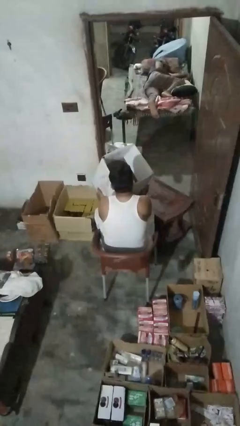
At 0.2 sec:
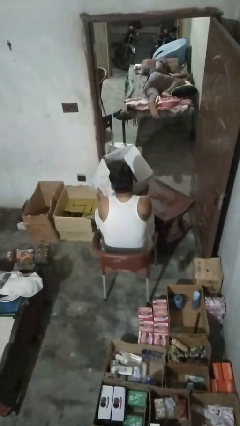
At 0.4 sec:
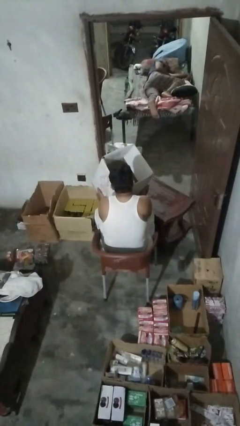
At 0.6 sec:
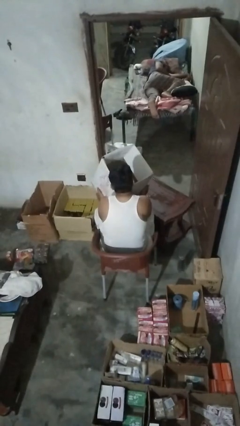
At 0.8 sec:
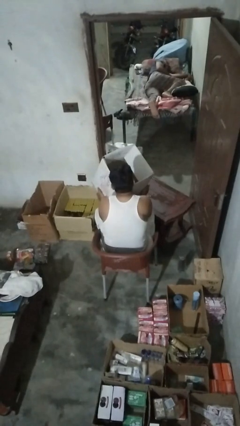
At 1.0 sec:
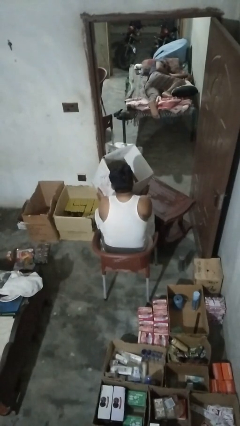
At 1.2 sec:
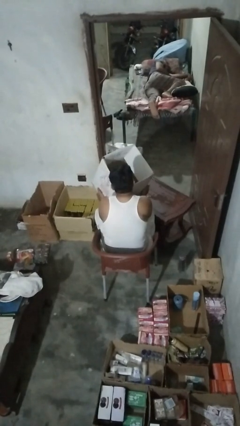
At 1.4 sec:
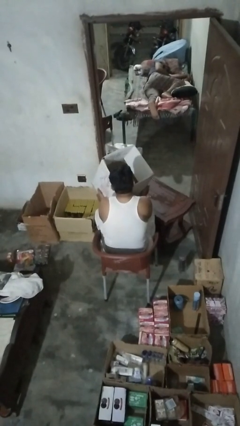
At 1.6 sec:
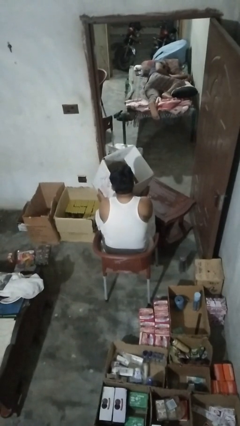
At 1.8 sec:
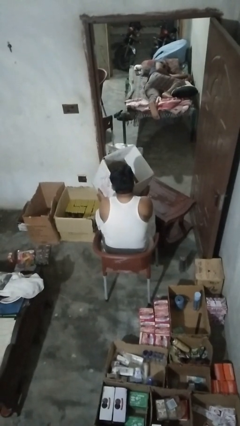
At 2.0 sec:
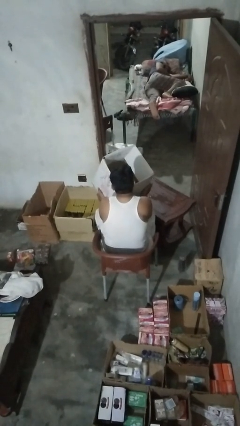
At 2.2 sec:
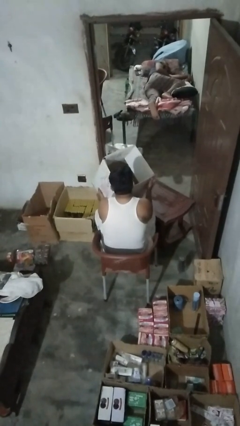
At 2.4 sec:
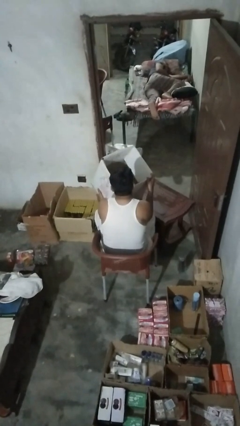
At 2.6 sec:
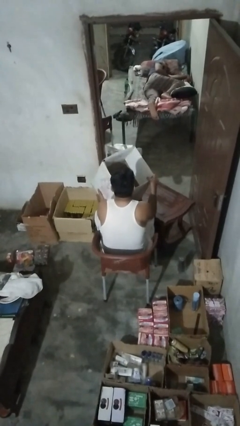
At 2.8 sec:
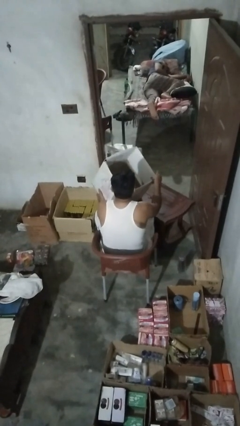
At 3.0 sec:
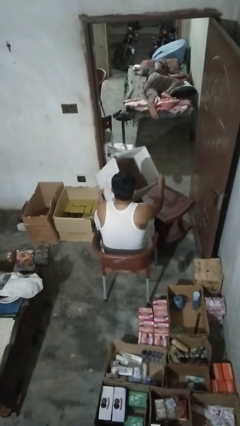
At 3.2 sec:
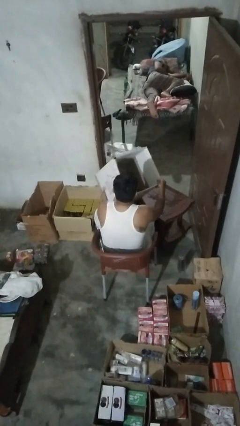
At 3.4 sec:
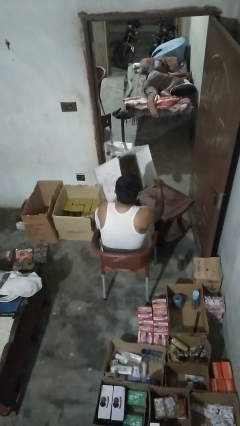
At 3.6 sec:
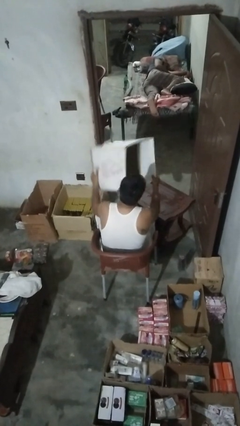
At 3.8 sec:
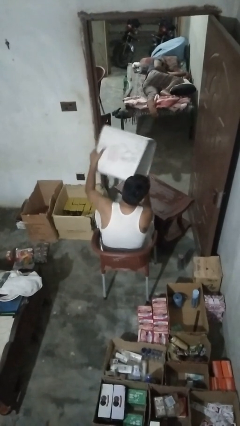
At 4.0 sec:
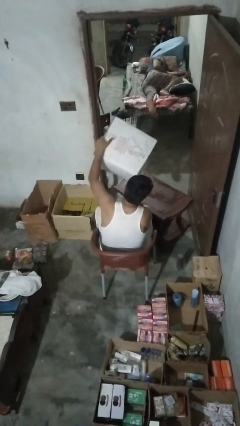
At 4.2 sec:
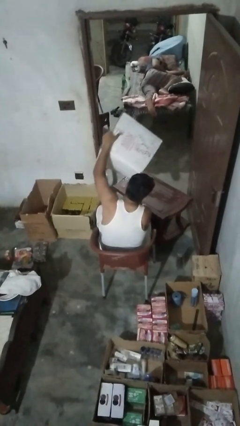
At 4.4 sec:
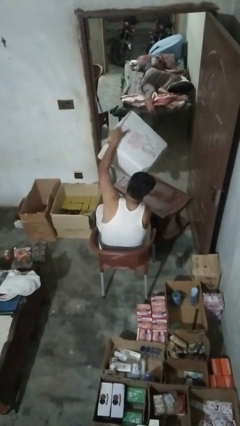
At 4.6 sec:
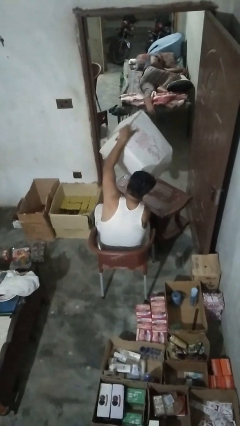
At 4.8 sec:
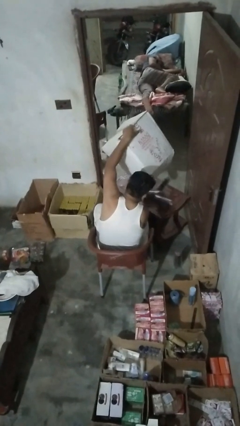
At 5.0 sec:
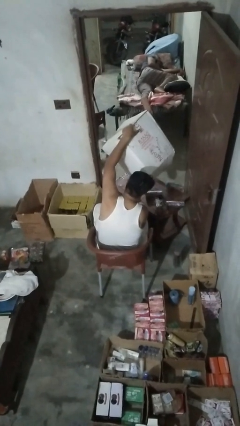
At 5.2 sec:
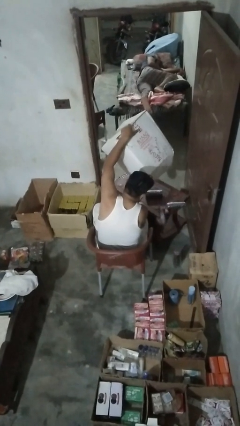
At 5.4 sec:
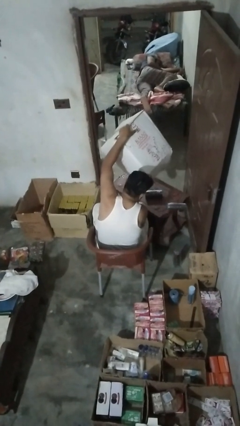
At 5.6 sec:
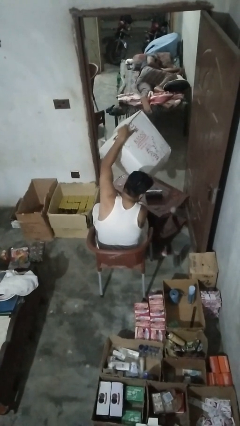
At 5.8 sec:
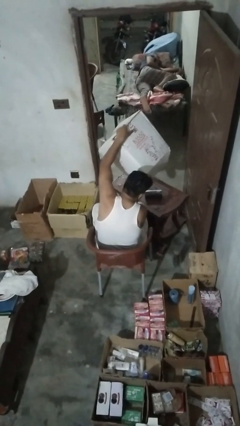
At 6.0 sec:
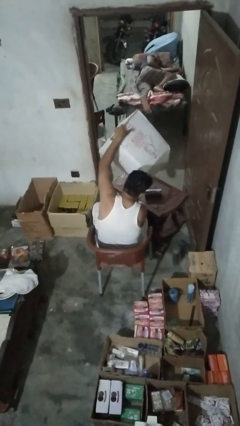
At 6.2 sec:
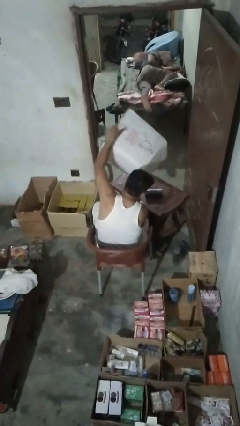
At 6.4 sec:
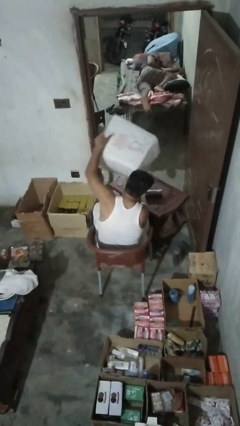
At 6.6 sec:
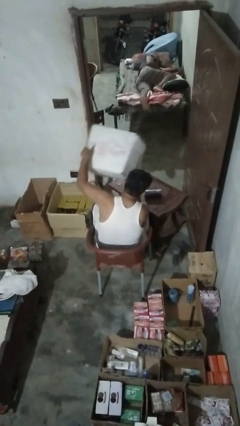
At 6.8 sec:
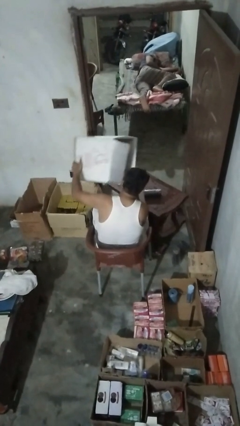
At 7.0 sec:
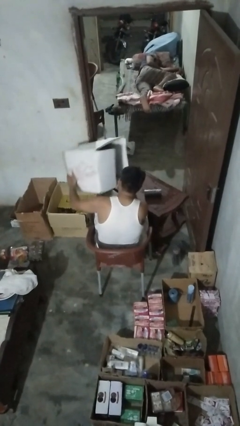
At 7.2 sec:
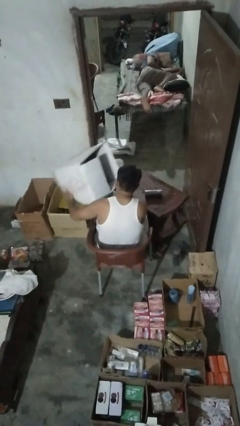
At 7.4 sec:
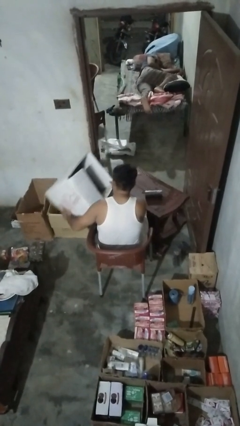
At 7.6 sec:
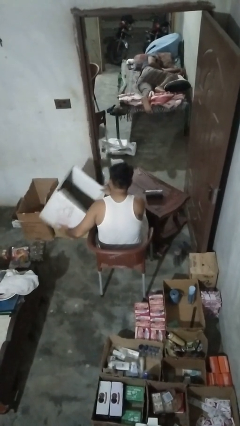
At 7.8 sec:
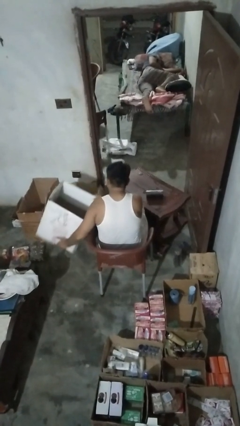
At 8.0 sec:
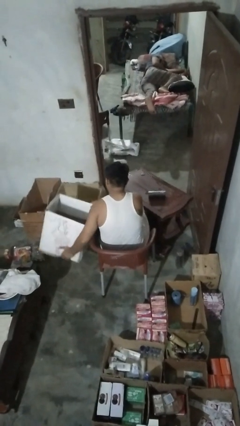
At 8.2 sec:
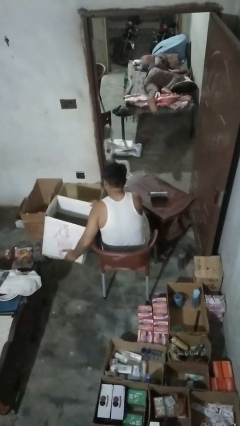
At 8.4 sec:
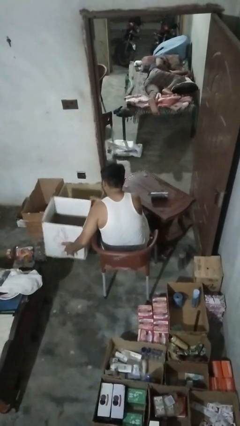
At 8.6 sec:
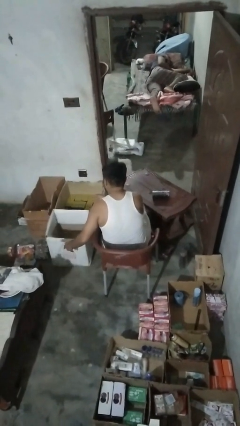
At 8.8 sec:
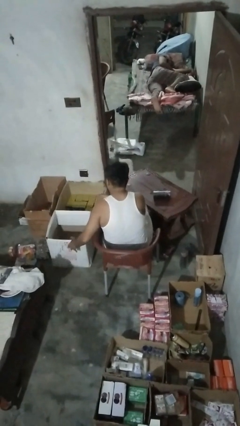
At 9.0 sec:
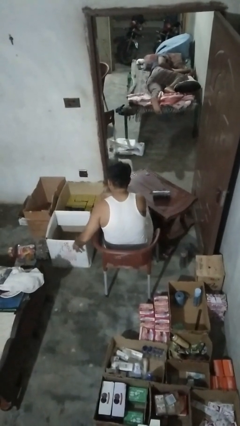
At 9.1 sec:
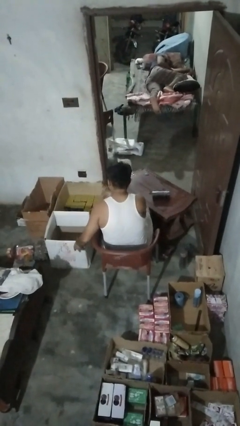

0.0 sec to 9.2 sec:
person unloads box onto table

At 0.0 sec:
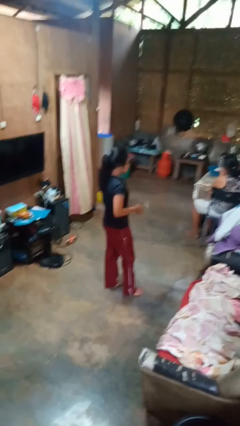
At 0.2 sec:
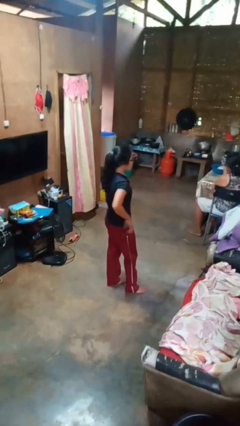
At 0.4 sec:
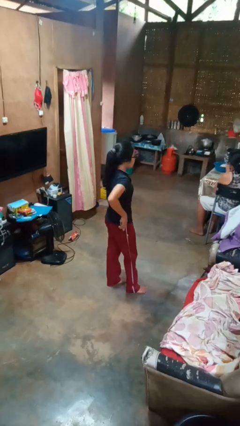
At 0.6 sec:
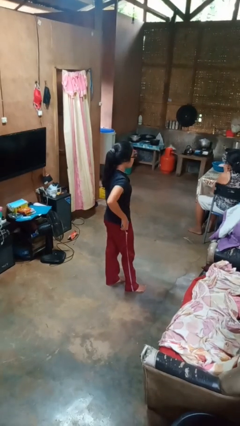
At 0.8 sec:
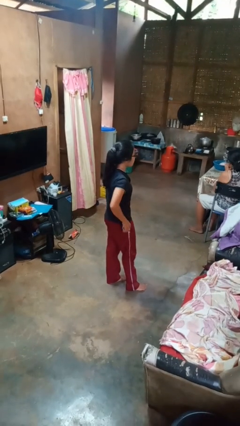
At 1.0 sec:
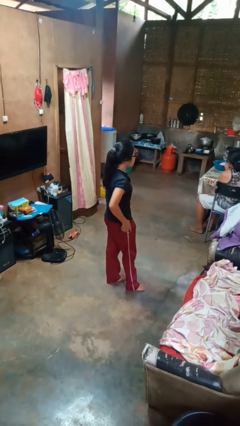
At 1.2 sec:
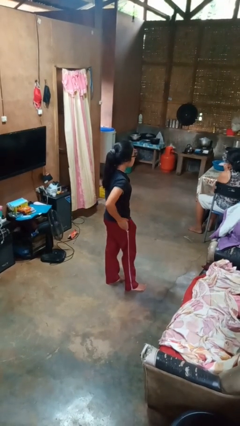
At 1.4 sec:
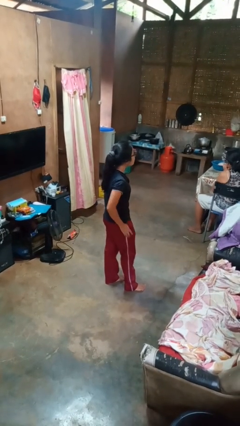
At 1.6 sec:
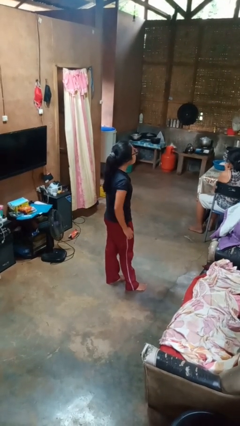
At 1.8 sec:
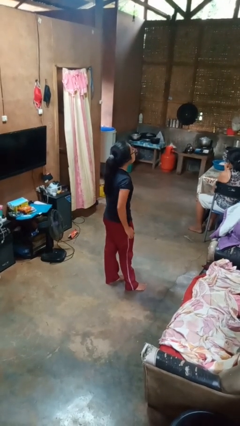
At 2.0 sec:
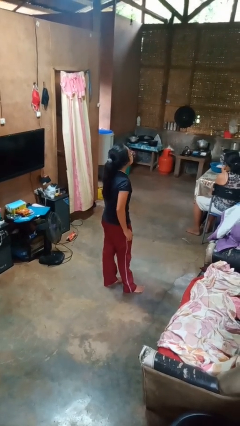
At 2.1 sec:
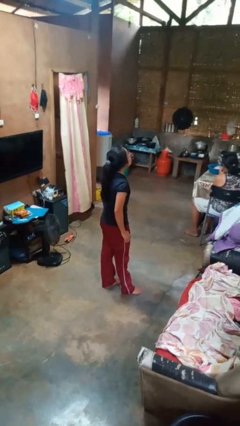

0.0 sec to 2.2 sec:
person puts phone into pocket

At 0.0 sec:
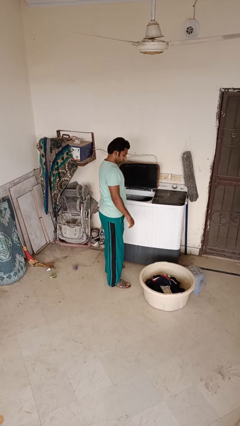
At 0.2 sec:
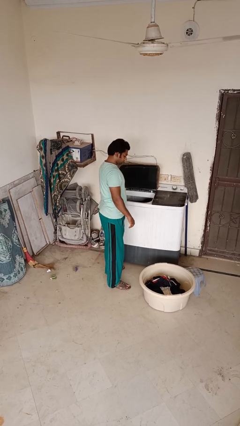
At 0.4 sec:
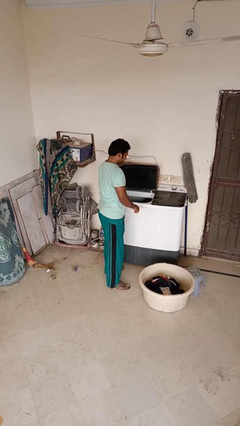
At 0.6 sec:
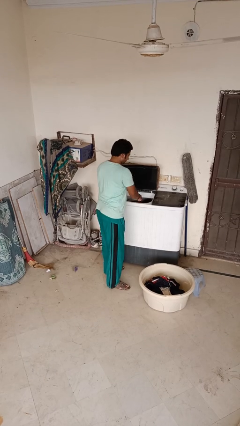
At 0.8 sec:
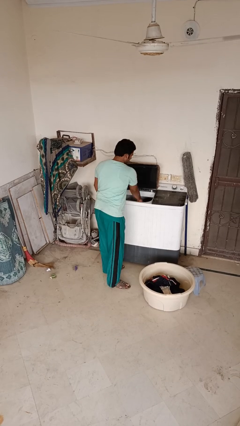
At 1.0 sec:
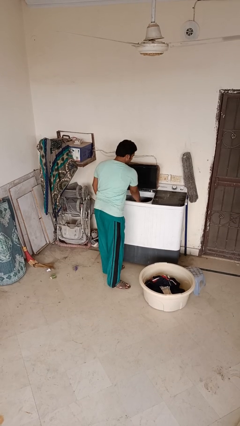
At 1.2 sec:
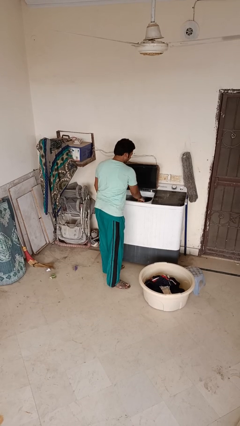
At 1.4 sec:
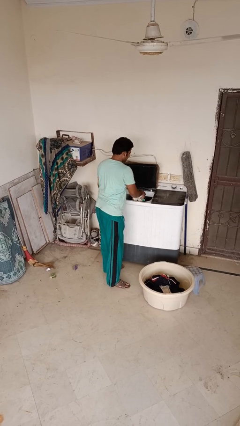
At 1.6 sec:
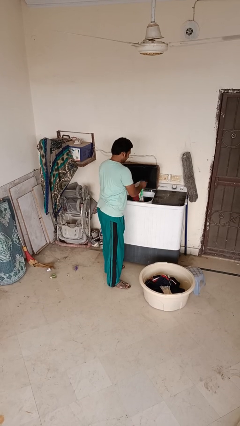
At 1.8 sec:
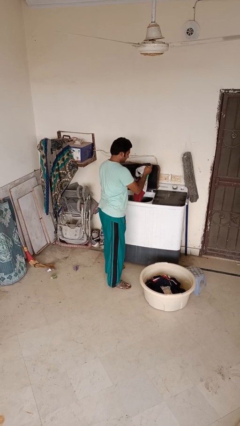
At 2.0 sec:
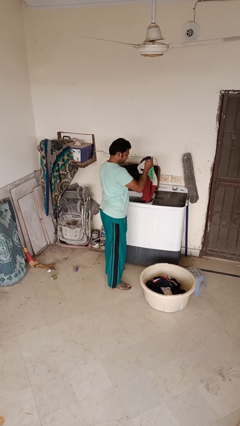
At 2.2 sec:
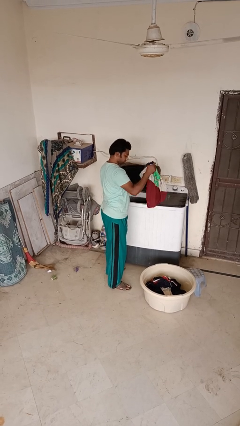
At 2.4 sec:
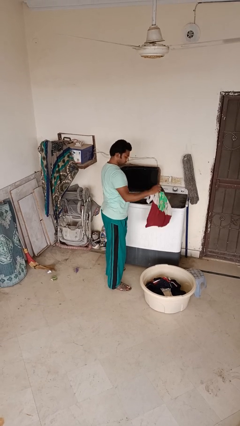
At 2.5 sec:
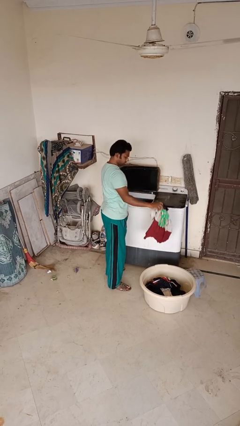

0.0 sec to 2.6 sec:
person loads clotheswasher

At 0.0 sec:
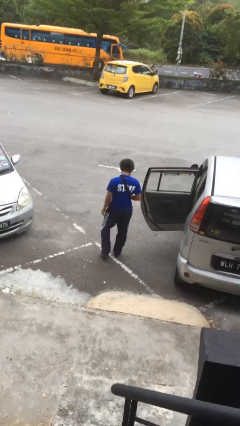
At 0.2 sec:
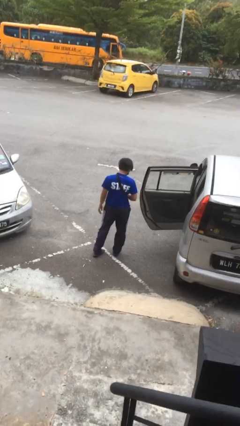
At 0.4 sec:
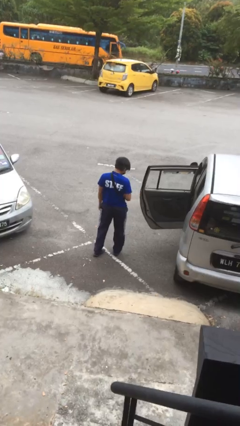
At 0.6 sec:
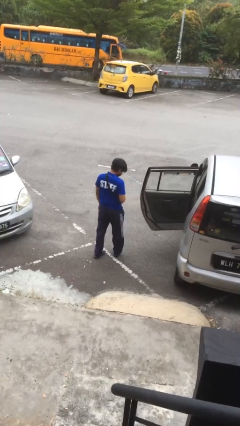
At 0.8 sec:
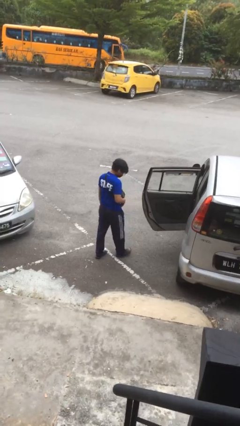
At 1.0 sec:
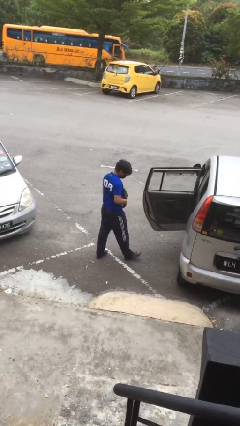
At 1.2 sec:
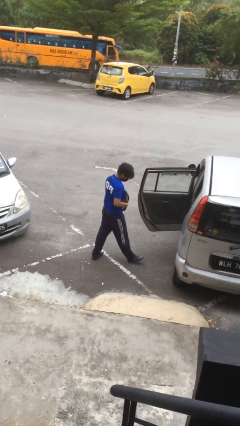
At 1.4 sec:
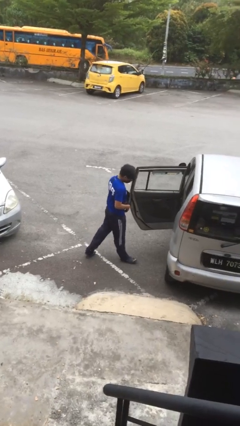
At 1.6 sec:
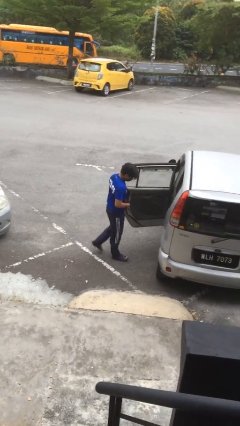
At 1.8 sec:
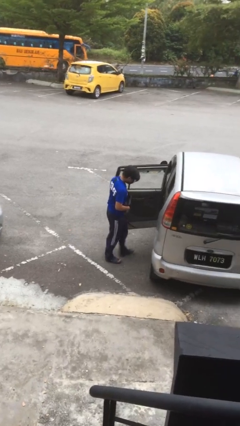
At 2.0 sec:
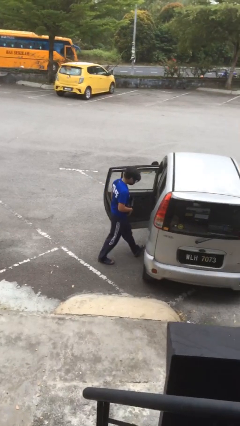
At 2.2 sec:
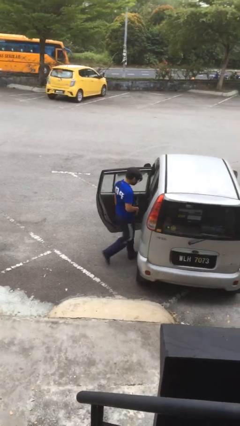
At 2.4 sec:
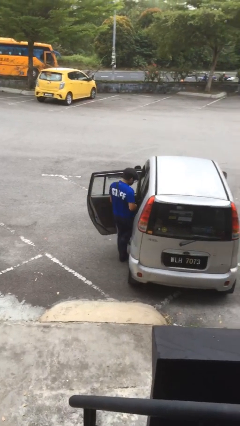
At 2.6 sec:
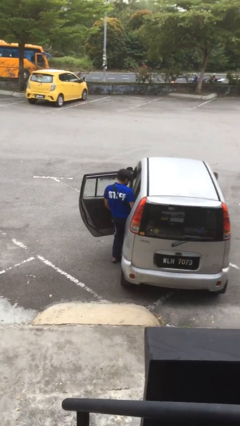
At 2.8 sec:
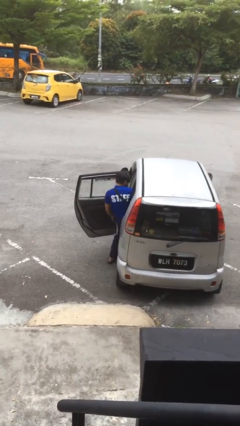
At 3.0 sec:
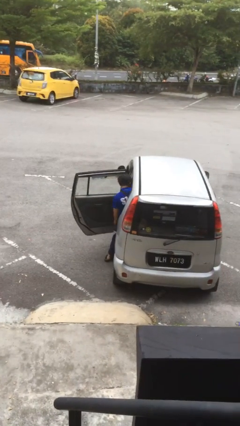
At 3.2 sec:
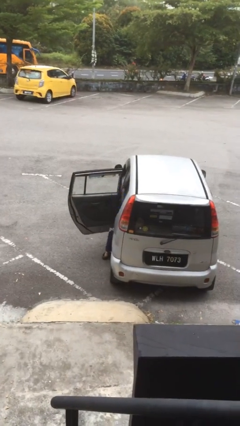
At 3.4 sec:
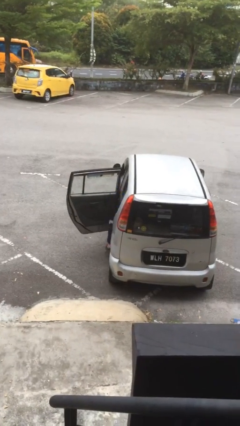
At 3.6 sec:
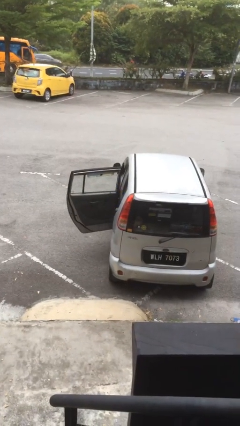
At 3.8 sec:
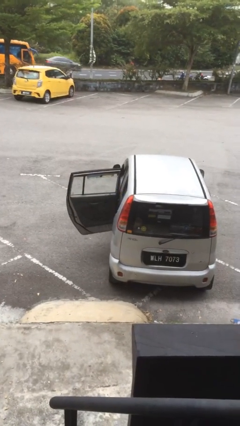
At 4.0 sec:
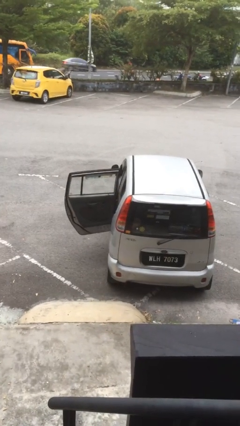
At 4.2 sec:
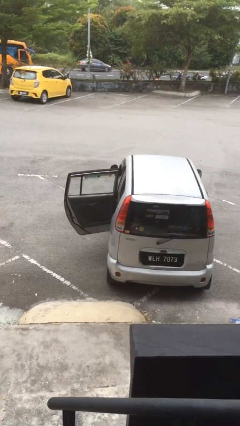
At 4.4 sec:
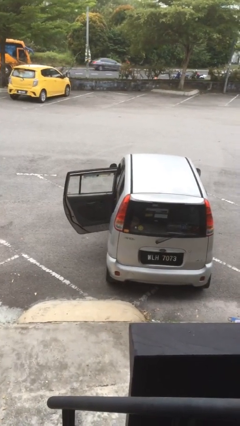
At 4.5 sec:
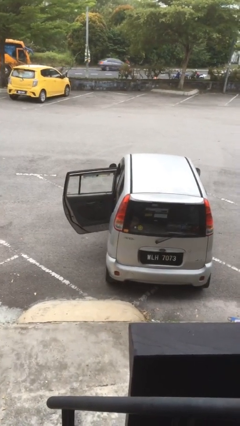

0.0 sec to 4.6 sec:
person enters car
